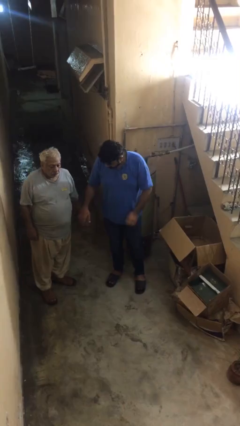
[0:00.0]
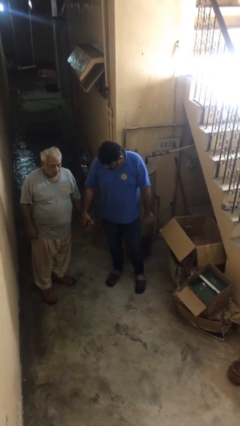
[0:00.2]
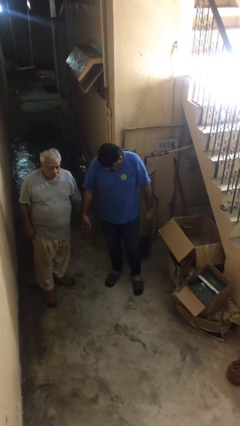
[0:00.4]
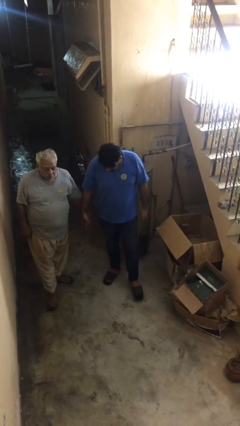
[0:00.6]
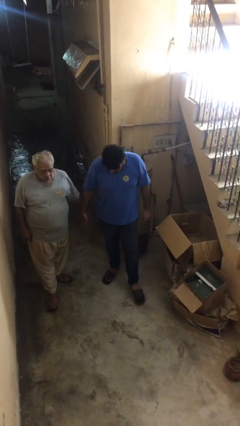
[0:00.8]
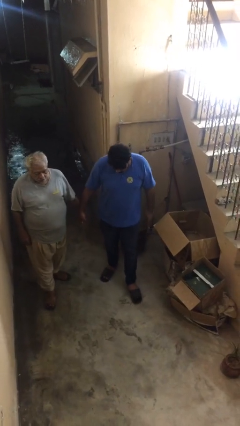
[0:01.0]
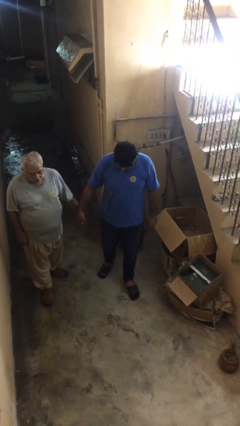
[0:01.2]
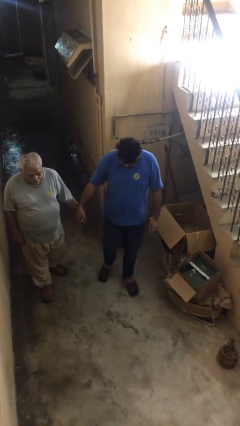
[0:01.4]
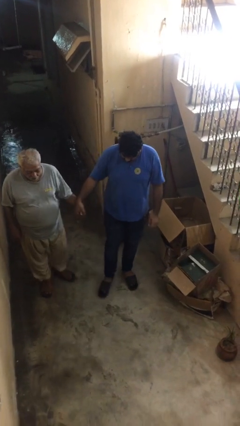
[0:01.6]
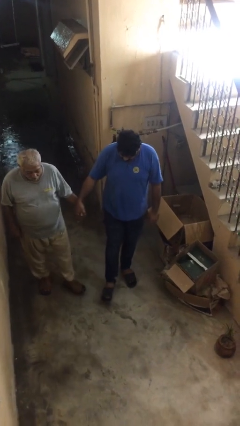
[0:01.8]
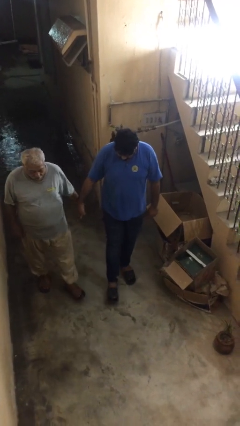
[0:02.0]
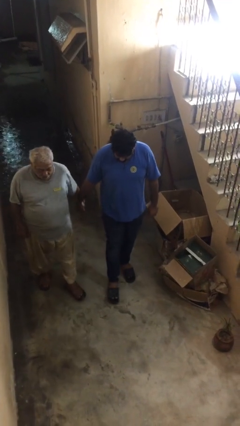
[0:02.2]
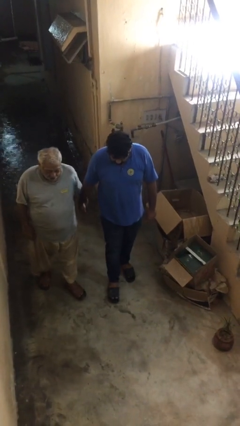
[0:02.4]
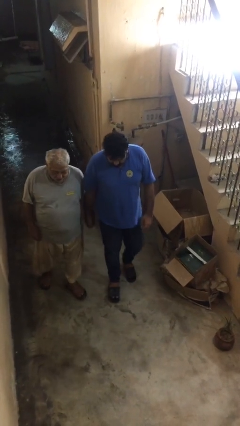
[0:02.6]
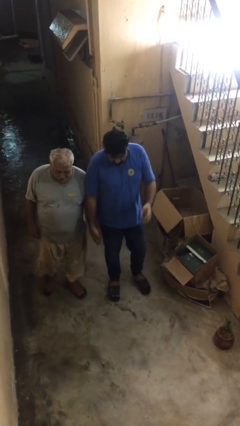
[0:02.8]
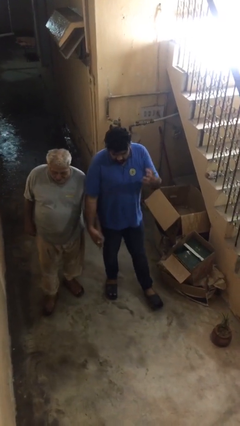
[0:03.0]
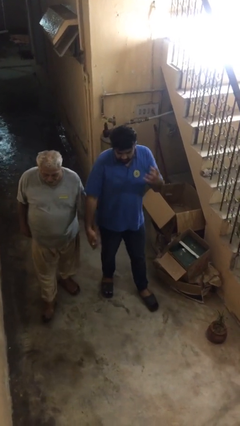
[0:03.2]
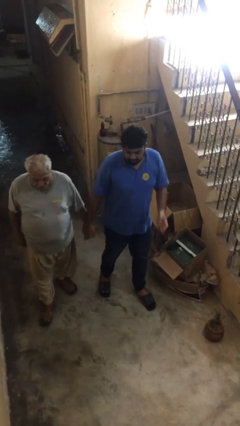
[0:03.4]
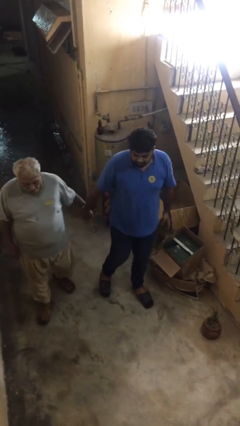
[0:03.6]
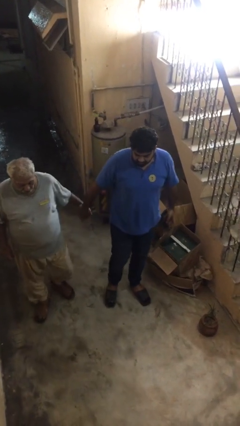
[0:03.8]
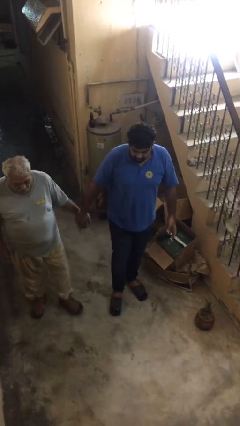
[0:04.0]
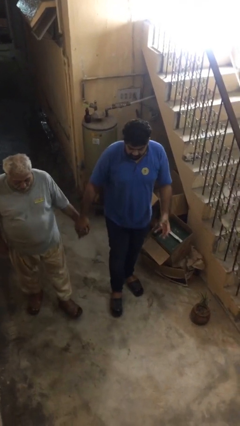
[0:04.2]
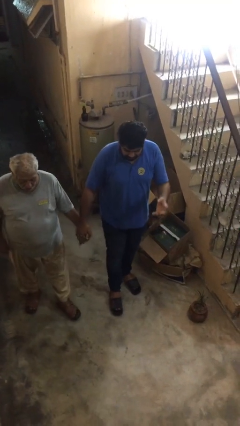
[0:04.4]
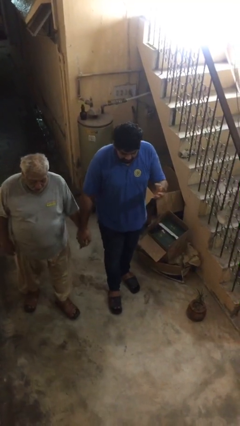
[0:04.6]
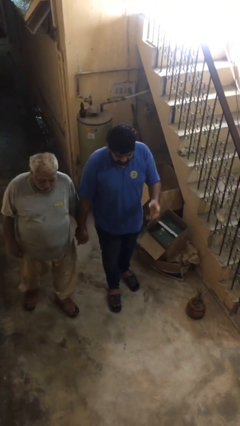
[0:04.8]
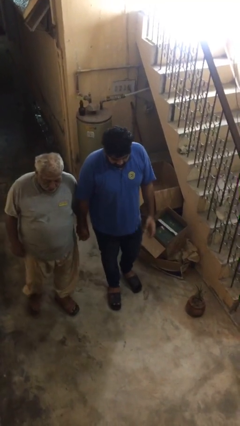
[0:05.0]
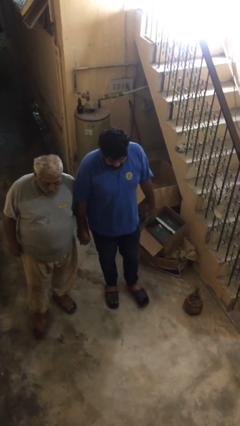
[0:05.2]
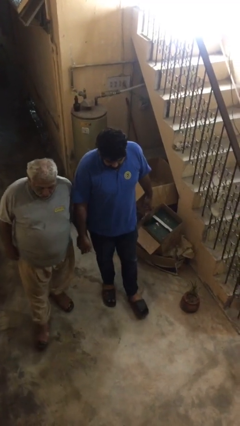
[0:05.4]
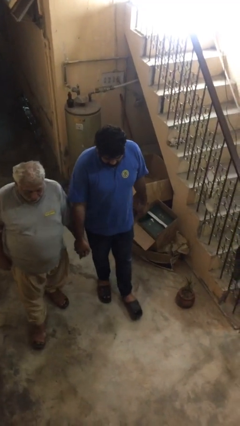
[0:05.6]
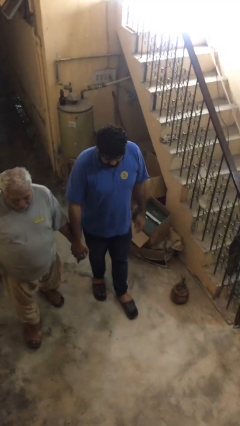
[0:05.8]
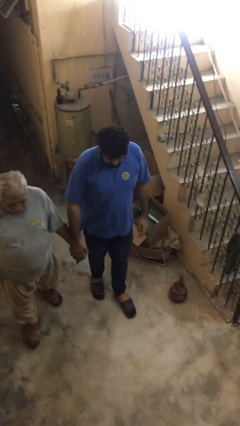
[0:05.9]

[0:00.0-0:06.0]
person holds hand

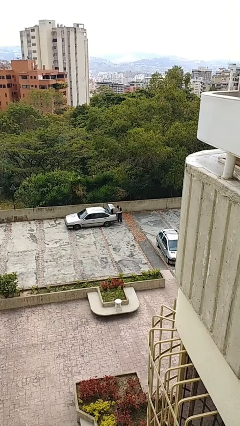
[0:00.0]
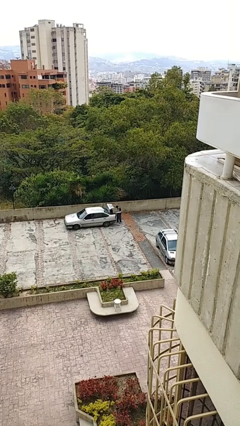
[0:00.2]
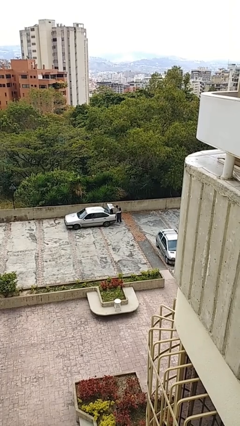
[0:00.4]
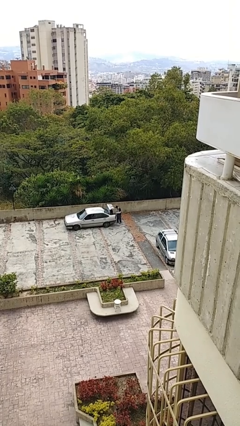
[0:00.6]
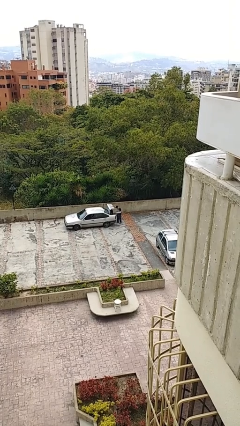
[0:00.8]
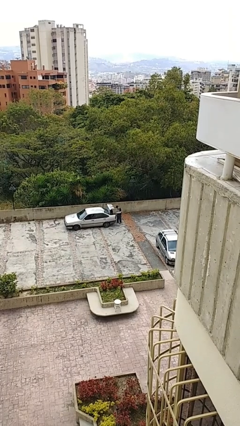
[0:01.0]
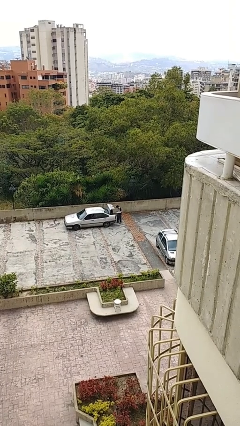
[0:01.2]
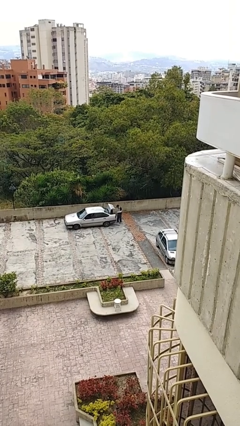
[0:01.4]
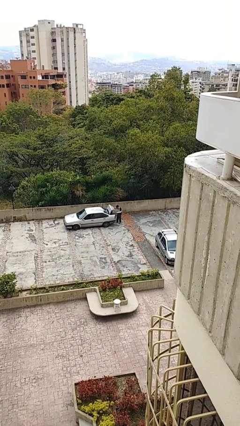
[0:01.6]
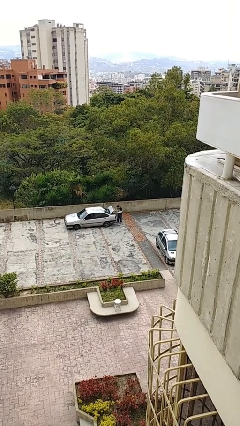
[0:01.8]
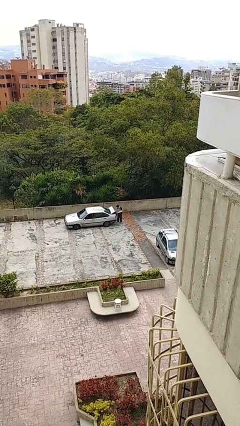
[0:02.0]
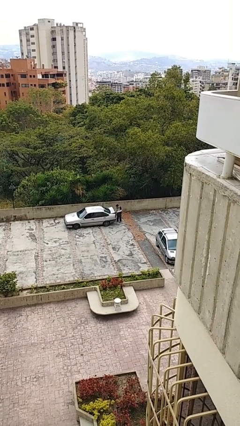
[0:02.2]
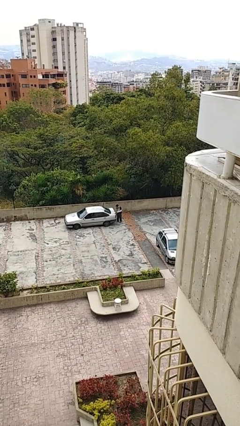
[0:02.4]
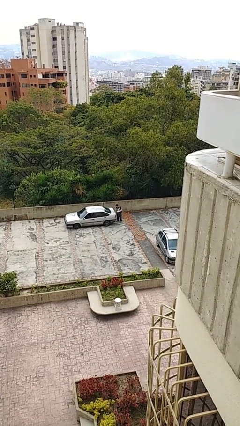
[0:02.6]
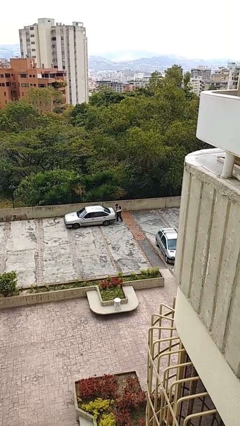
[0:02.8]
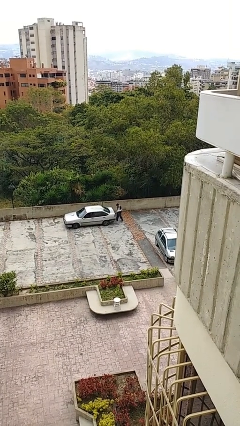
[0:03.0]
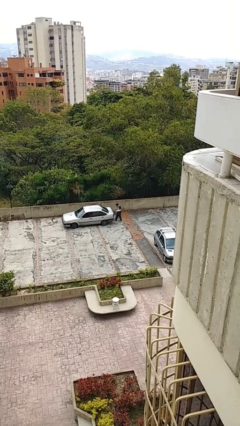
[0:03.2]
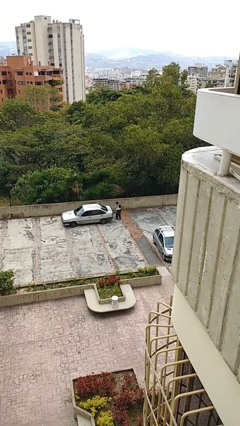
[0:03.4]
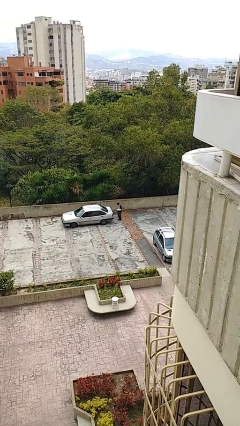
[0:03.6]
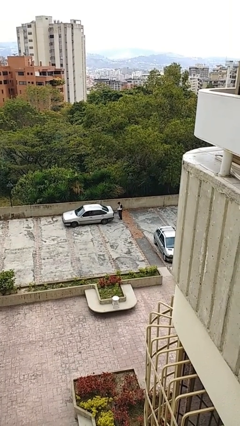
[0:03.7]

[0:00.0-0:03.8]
person closes car trunk

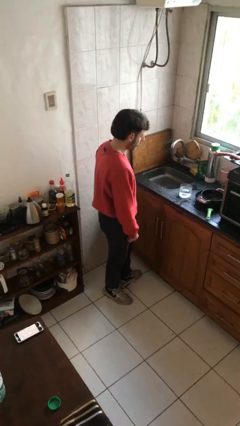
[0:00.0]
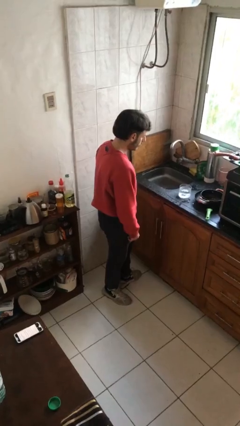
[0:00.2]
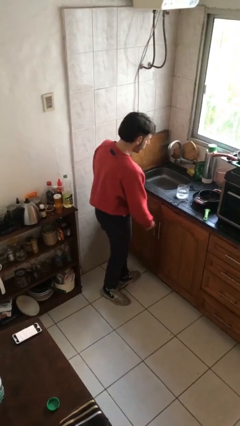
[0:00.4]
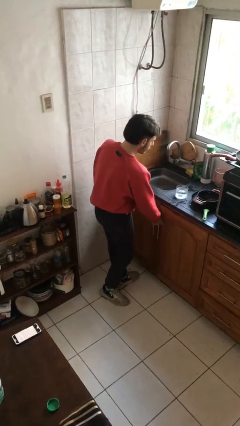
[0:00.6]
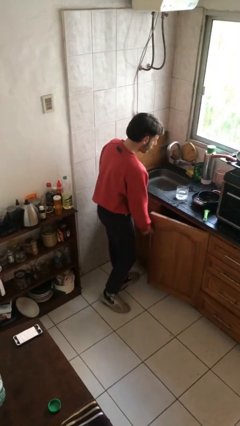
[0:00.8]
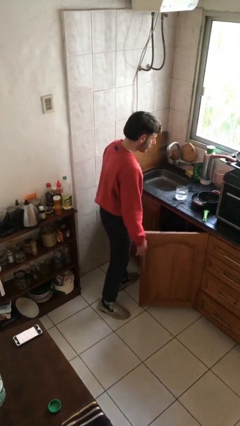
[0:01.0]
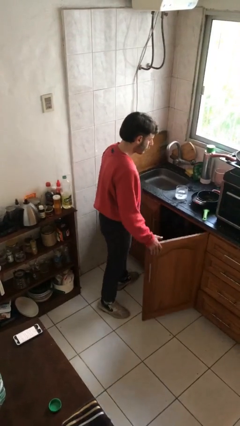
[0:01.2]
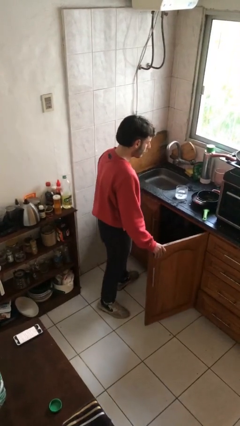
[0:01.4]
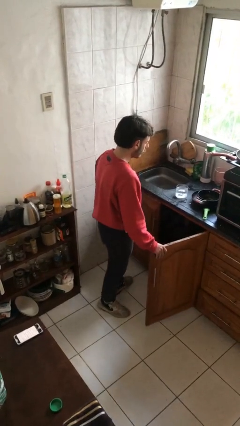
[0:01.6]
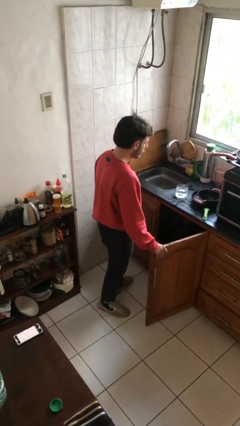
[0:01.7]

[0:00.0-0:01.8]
person opens cabinet

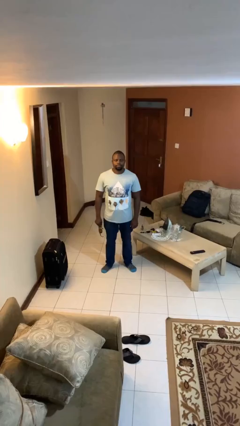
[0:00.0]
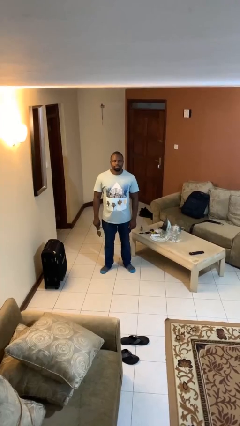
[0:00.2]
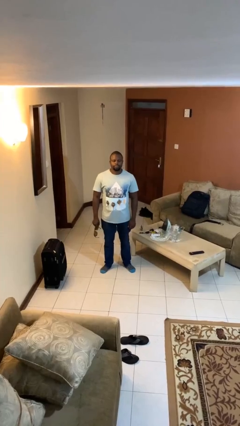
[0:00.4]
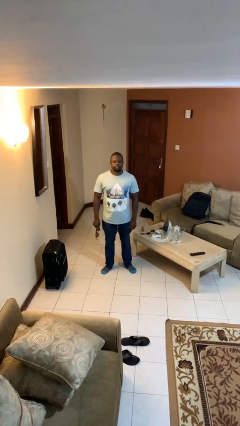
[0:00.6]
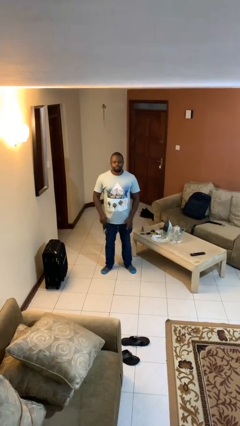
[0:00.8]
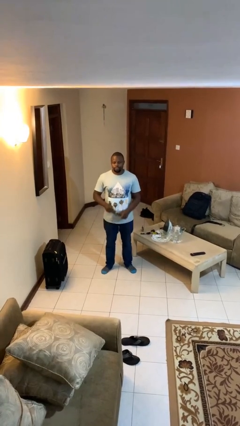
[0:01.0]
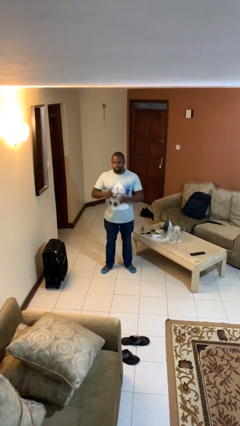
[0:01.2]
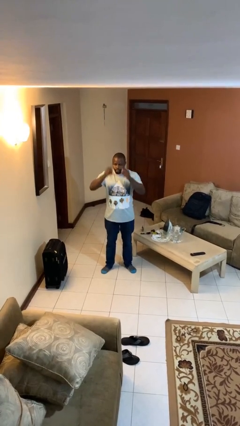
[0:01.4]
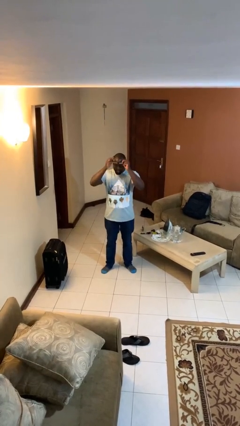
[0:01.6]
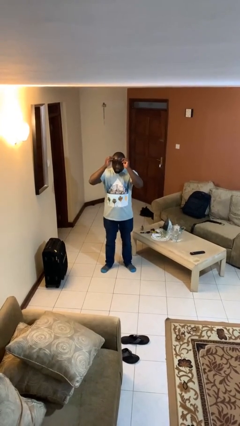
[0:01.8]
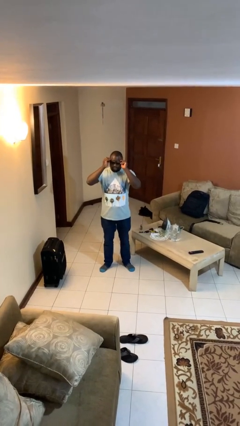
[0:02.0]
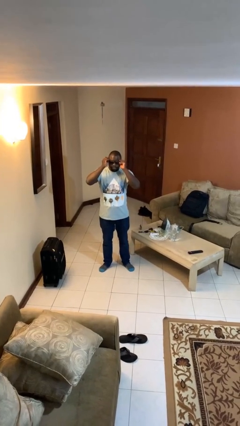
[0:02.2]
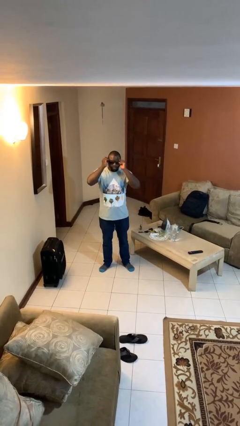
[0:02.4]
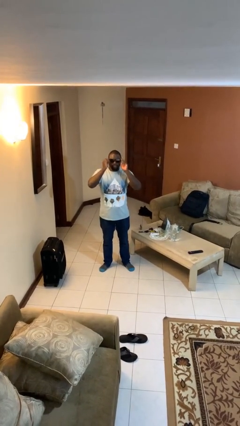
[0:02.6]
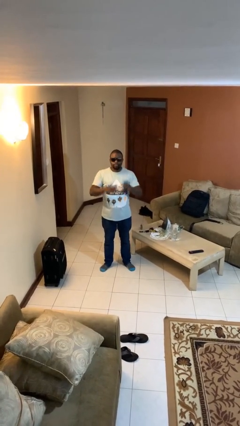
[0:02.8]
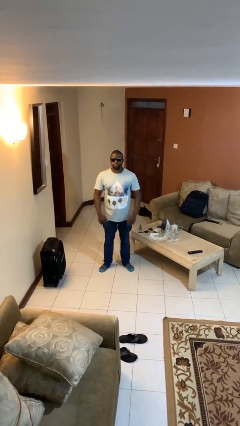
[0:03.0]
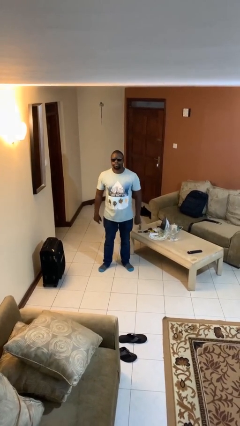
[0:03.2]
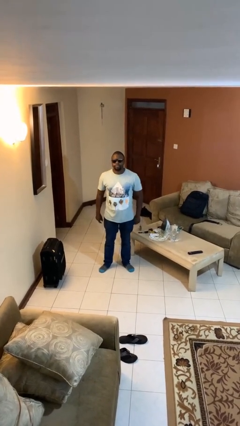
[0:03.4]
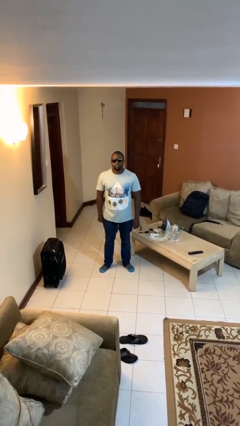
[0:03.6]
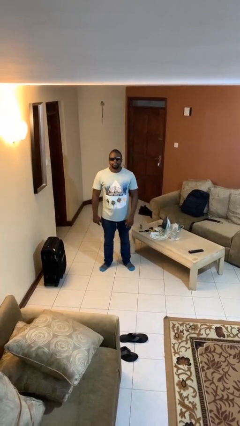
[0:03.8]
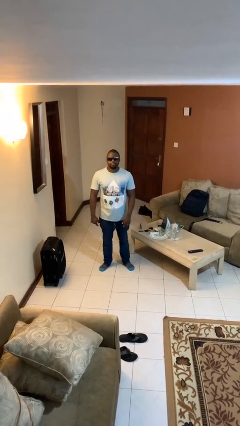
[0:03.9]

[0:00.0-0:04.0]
person puts on sunglasses

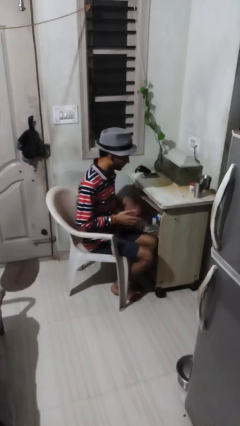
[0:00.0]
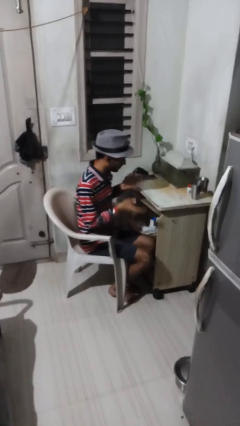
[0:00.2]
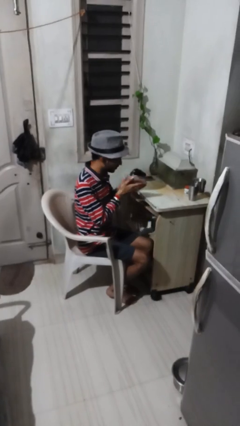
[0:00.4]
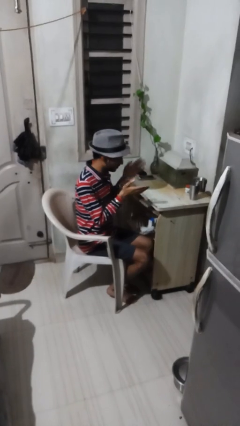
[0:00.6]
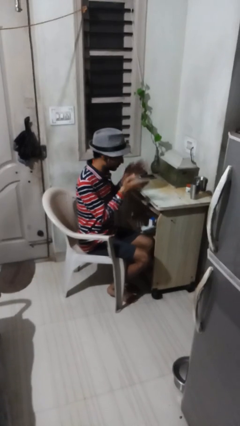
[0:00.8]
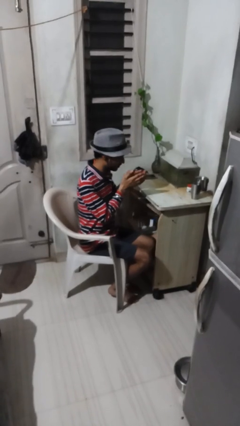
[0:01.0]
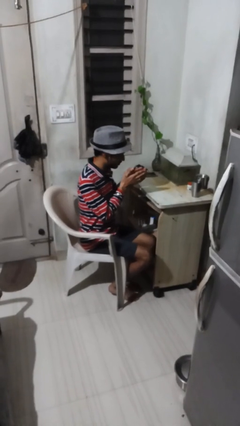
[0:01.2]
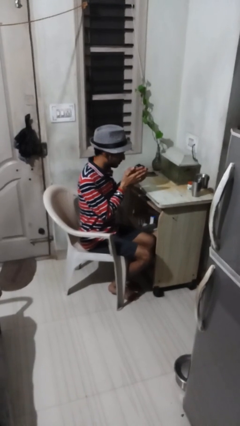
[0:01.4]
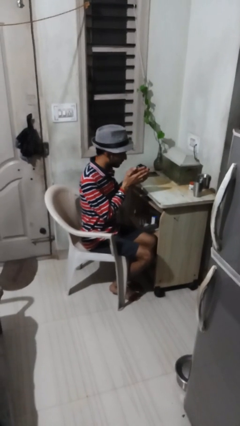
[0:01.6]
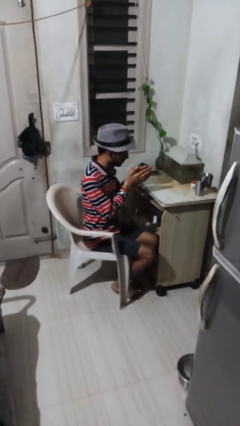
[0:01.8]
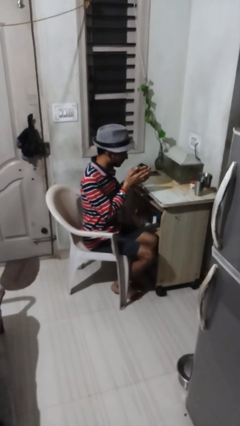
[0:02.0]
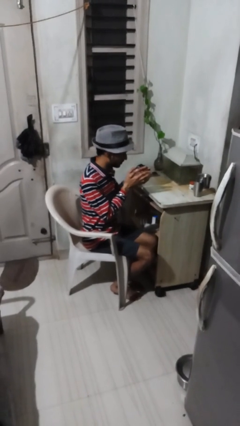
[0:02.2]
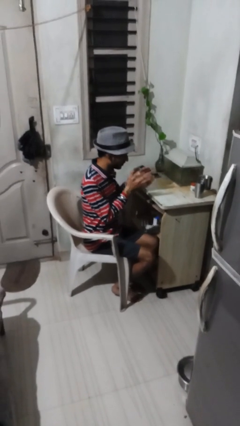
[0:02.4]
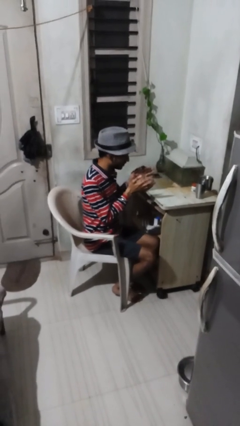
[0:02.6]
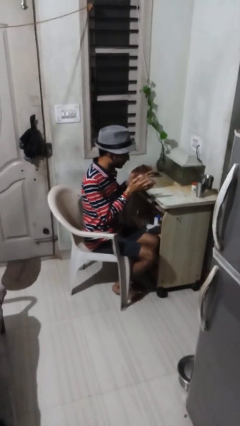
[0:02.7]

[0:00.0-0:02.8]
person claps hands
